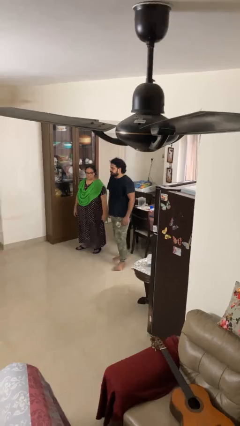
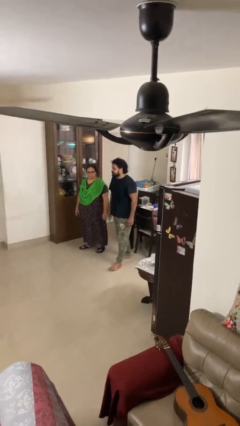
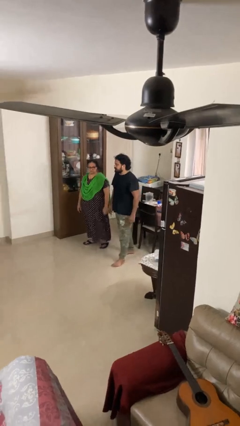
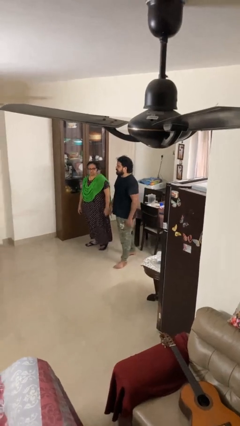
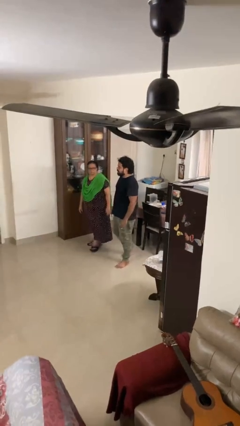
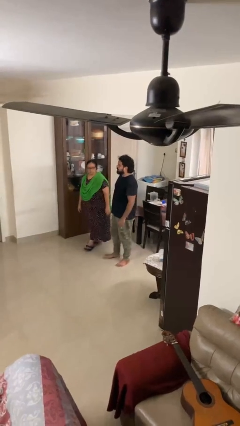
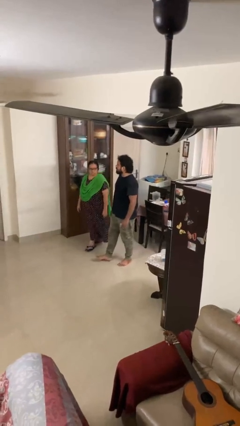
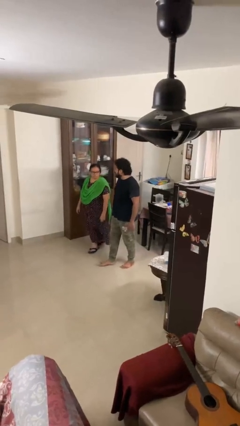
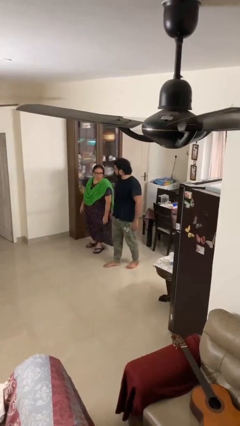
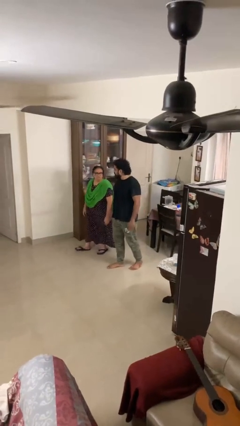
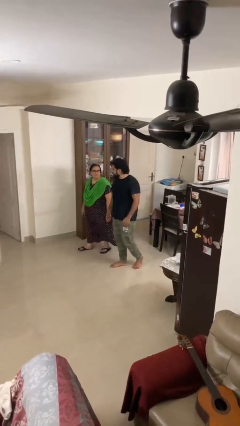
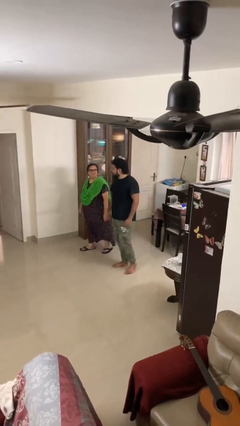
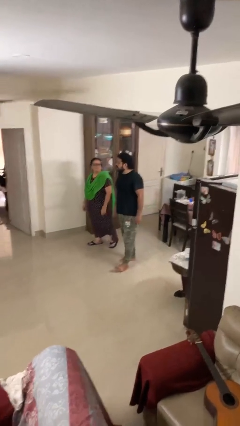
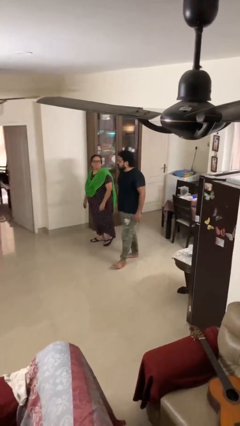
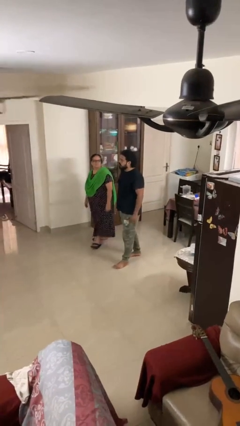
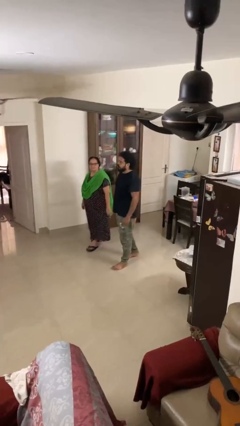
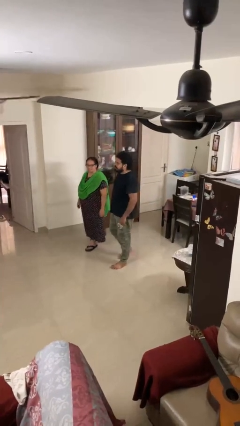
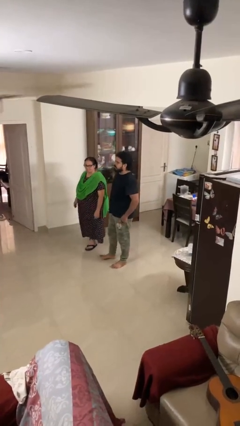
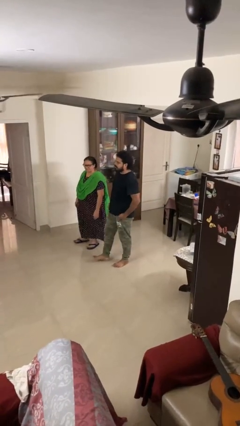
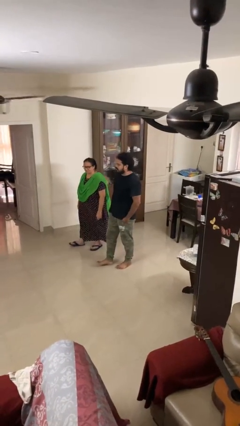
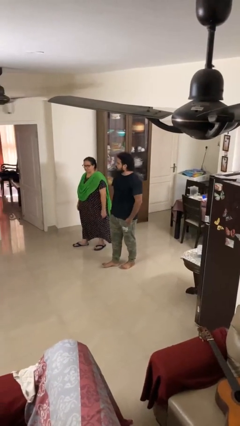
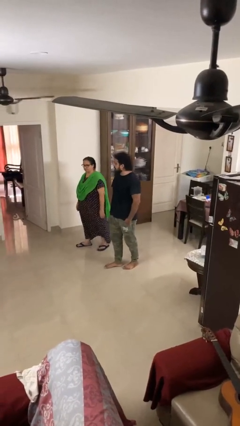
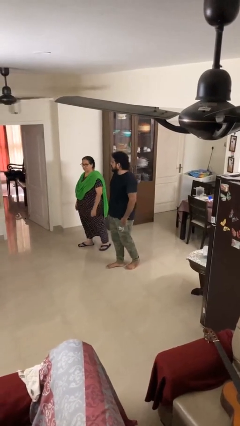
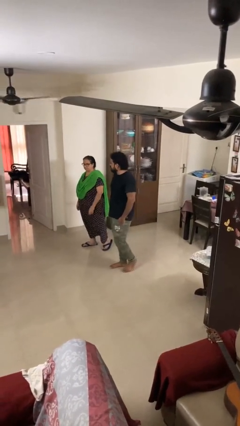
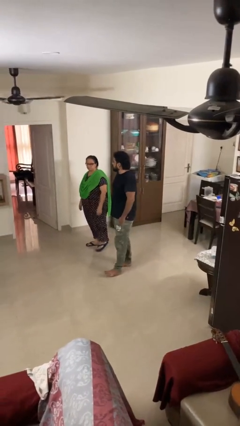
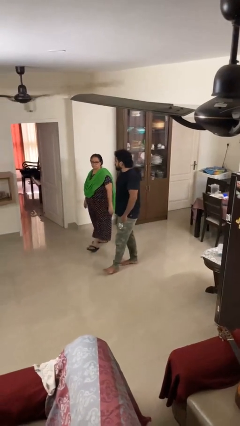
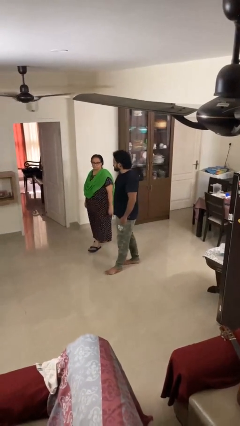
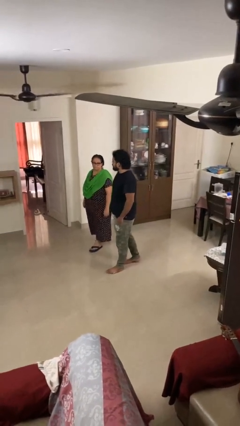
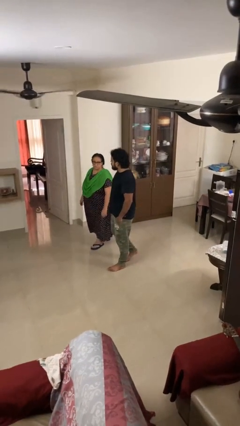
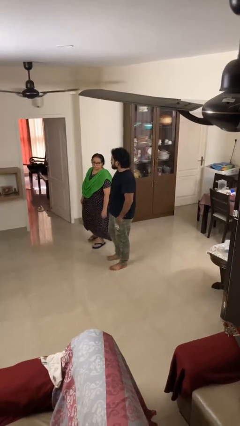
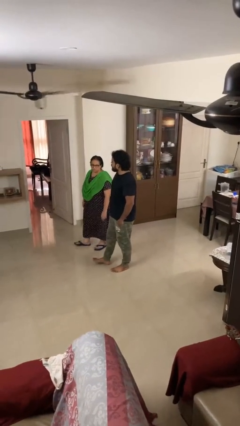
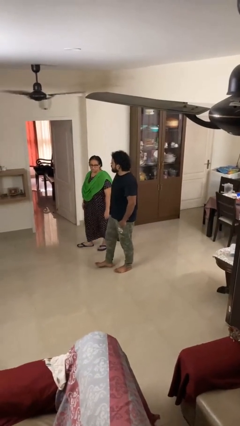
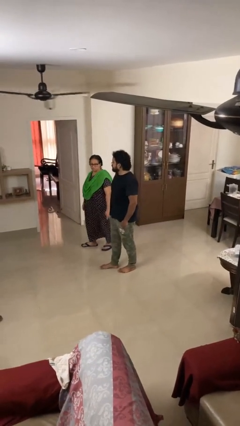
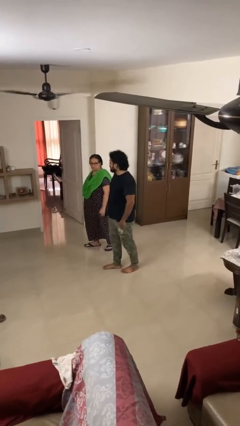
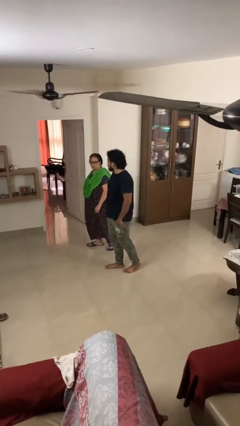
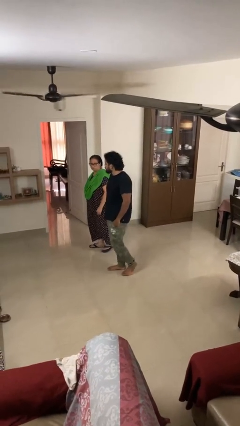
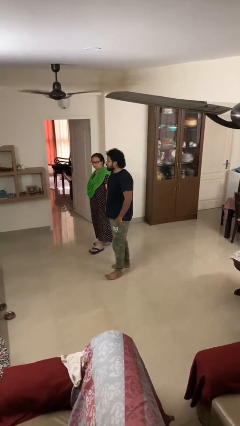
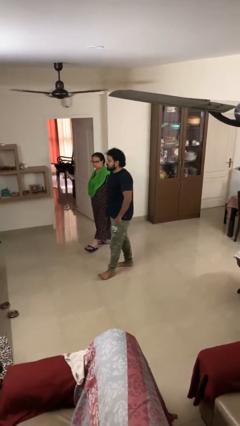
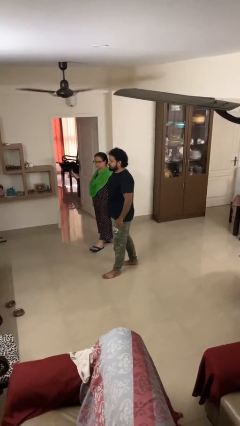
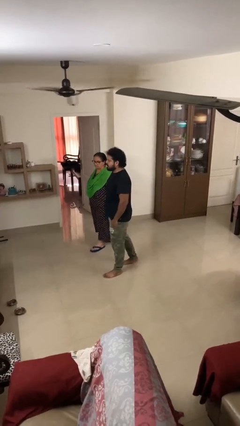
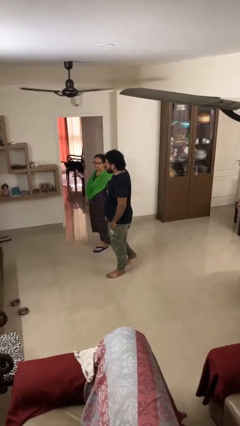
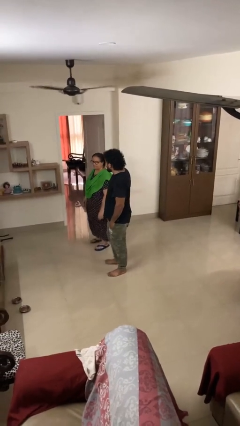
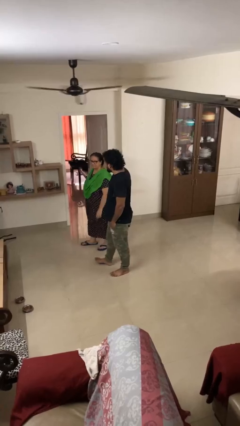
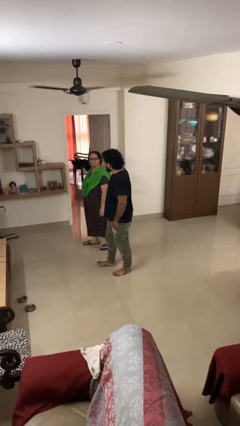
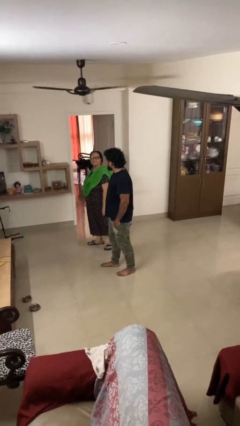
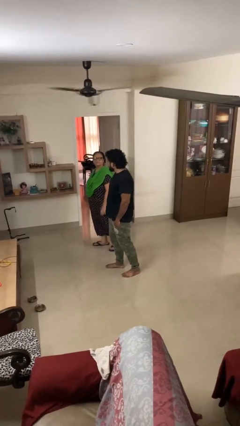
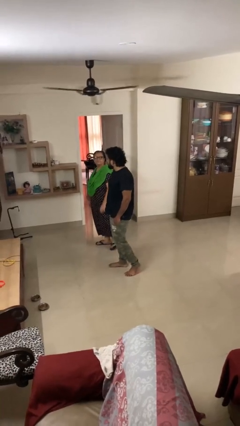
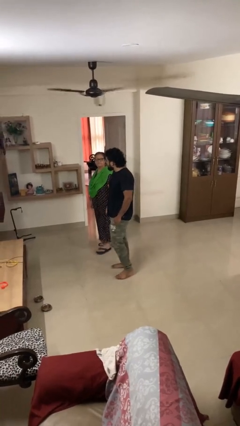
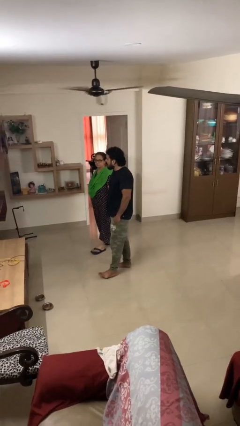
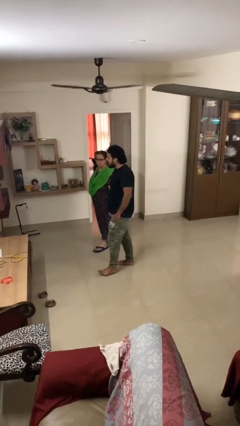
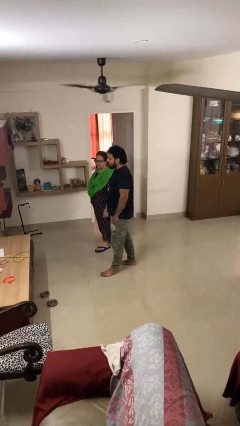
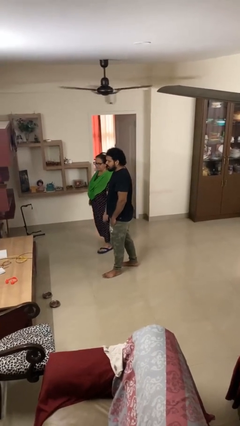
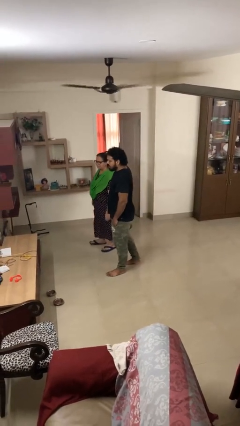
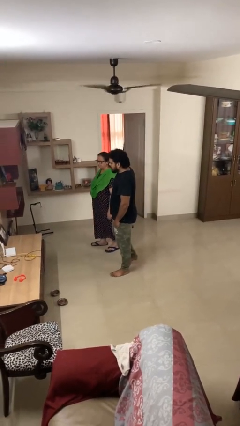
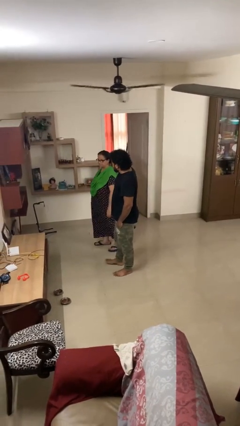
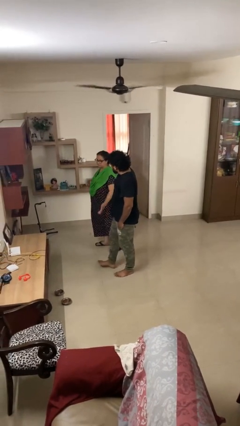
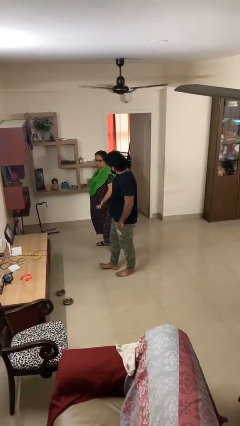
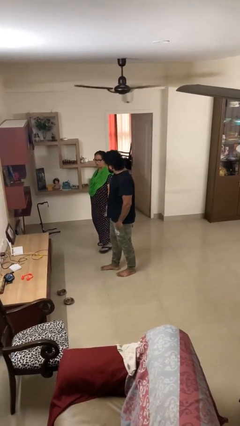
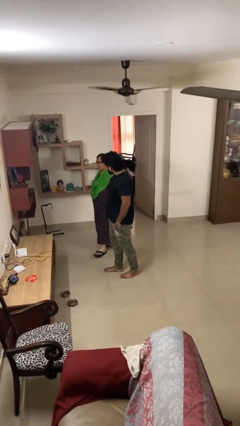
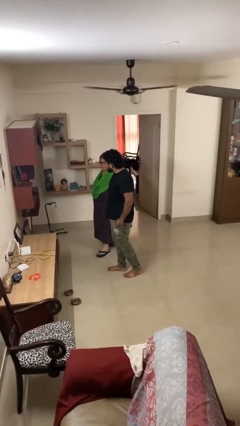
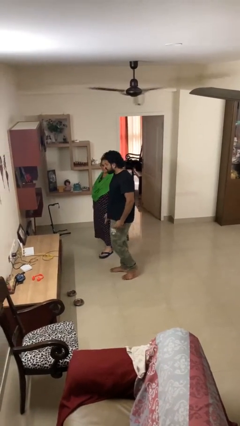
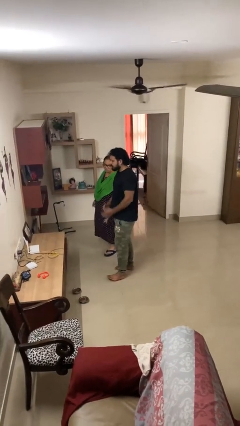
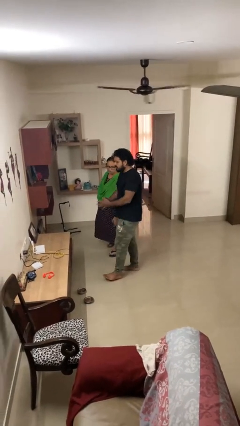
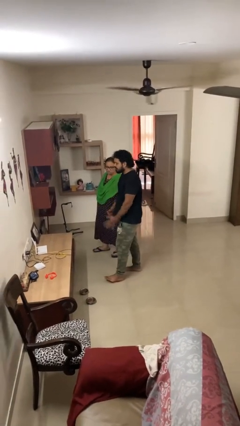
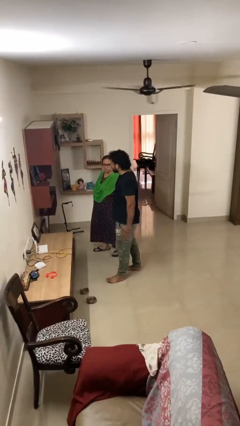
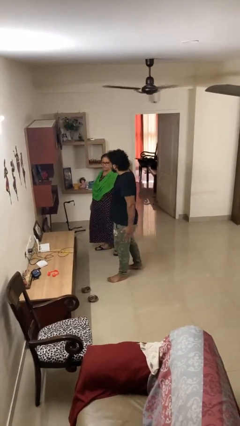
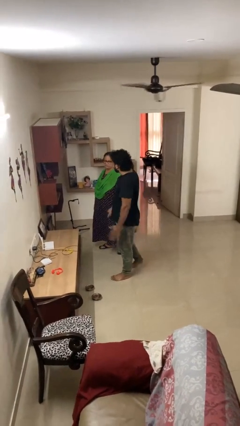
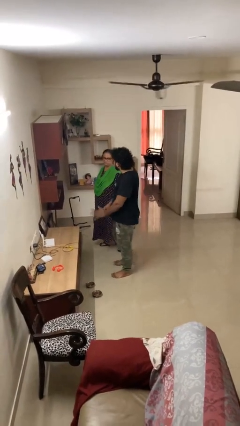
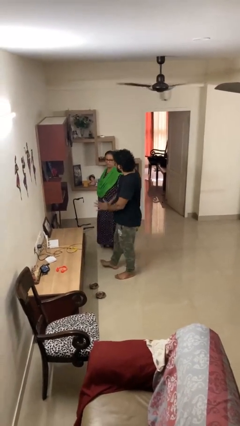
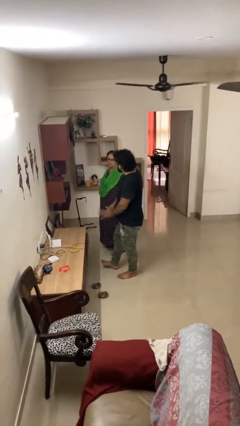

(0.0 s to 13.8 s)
person talks to person

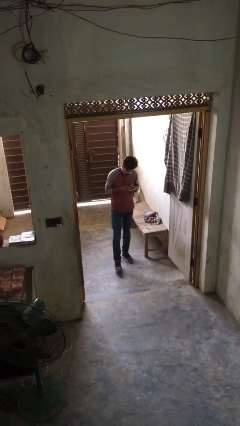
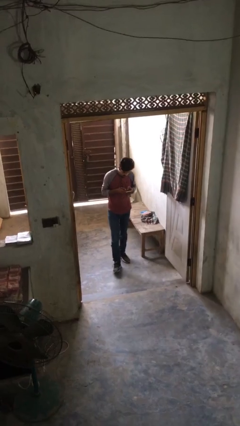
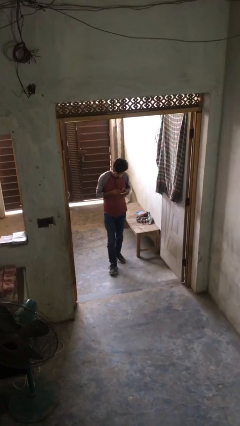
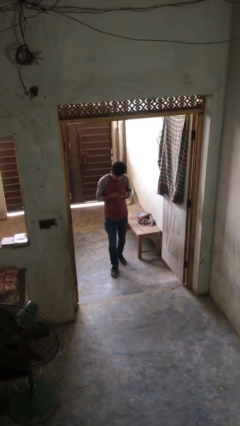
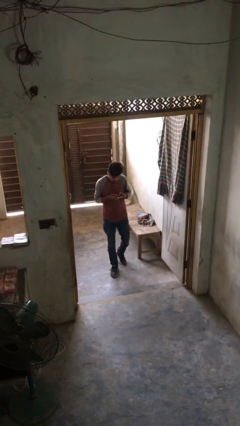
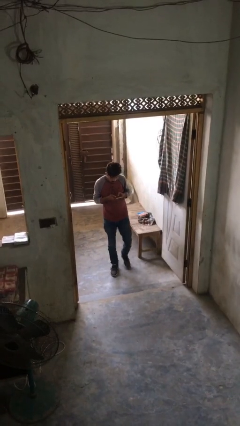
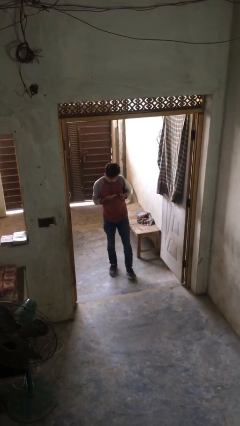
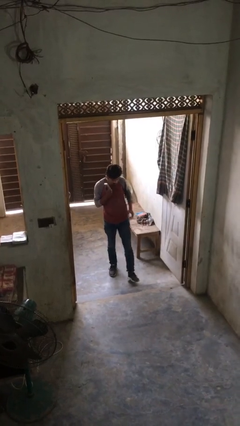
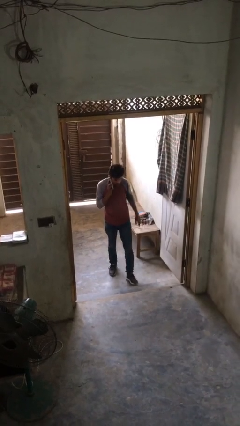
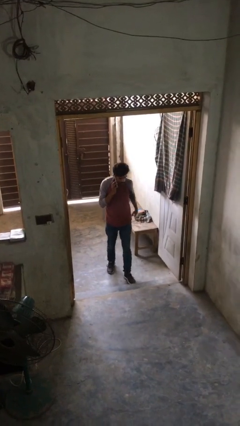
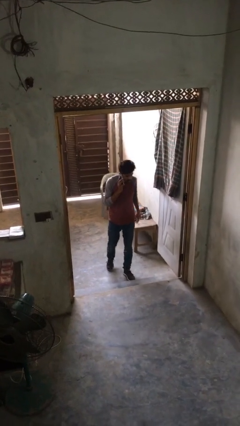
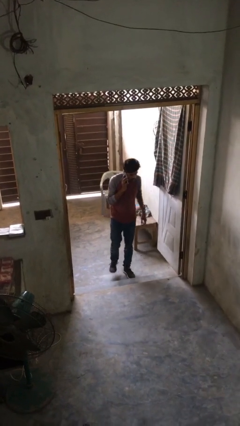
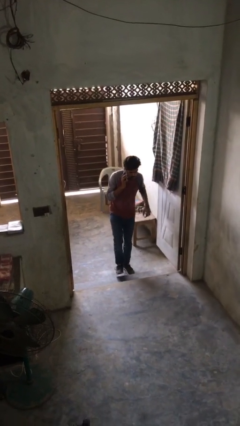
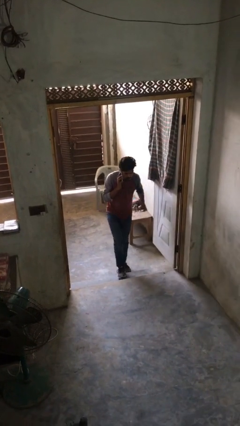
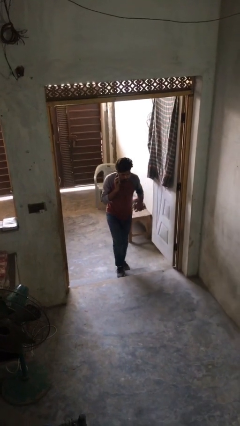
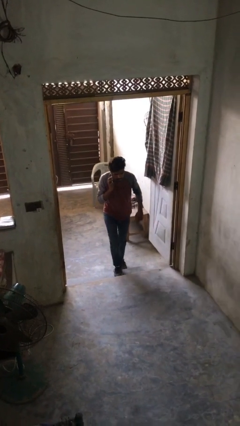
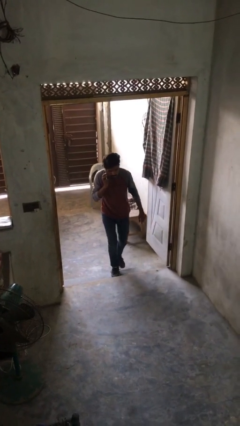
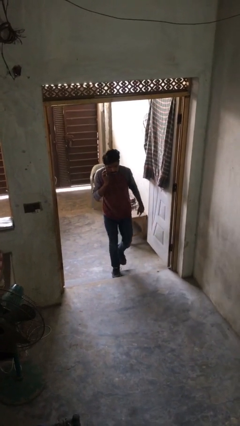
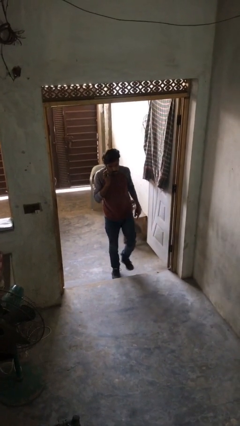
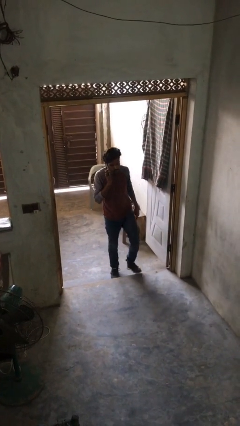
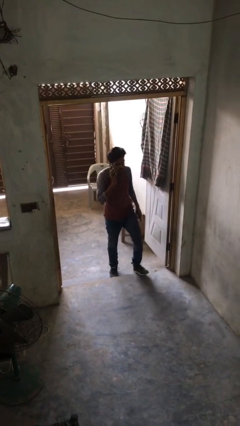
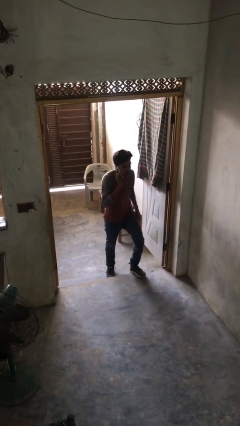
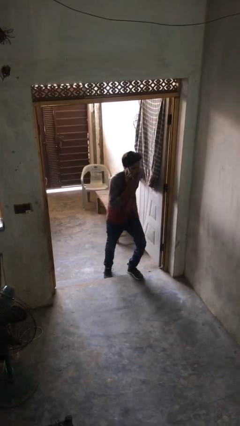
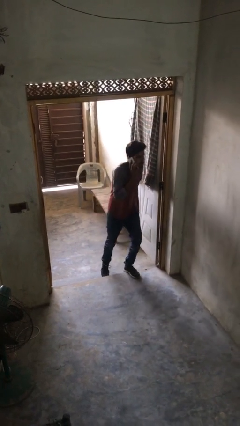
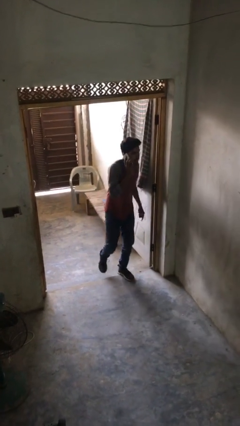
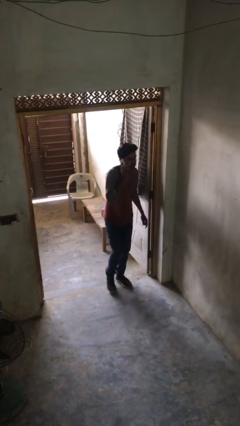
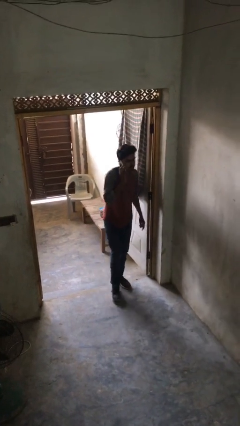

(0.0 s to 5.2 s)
person talks on phone
